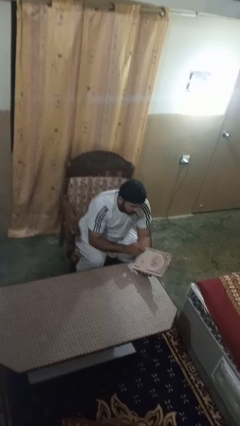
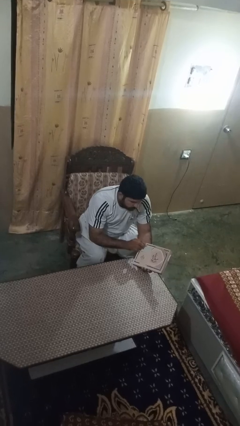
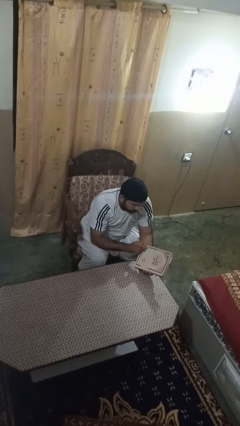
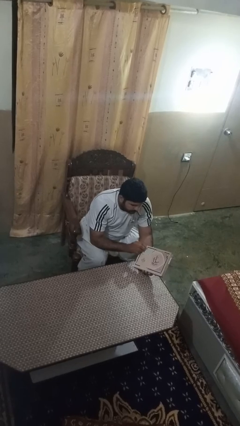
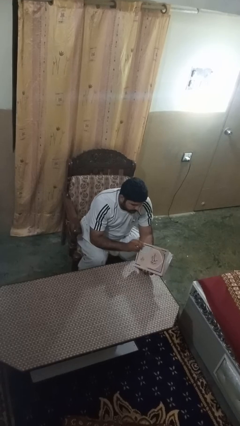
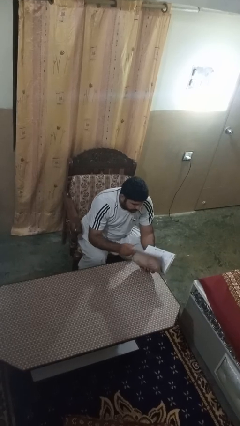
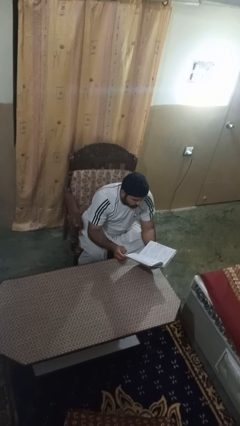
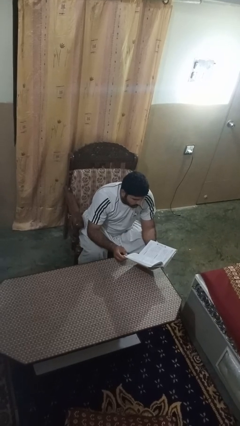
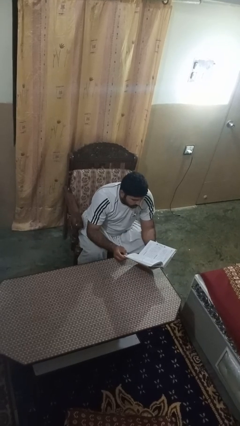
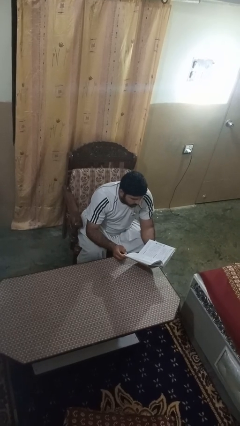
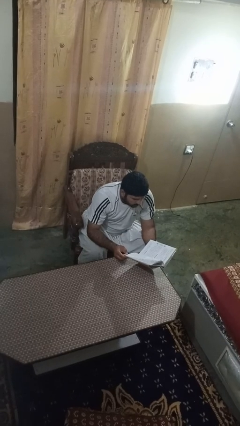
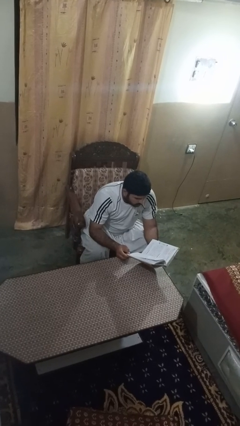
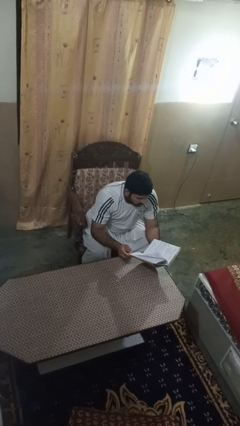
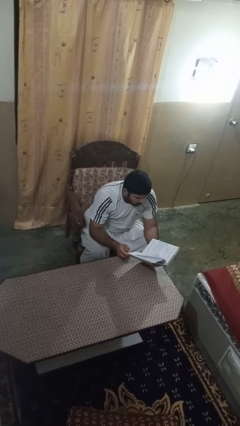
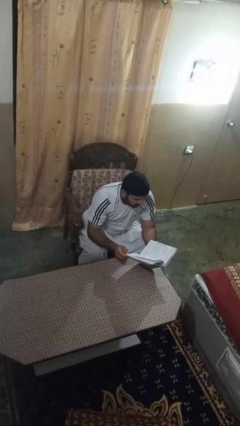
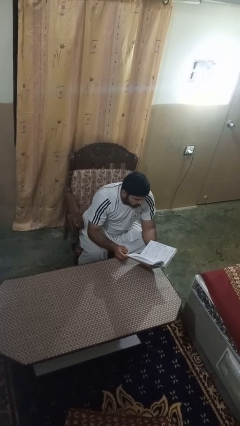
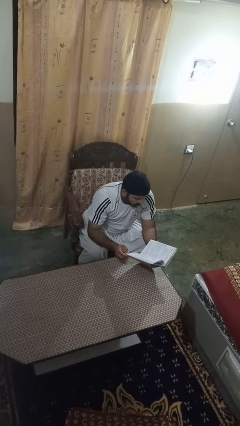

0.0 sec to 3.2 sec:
person reads book

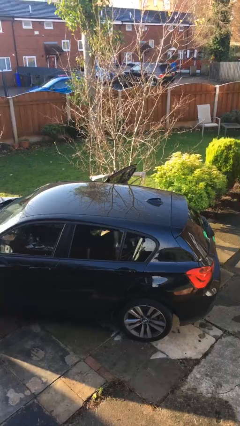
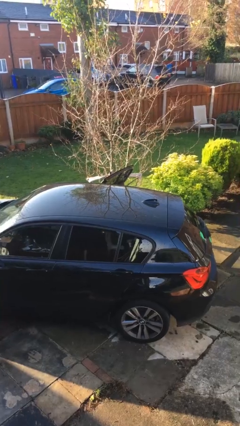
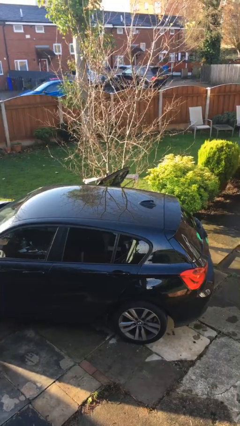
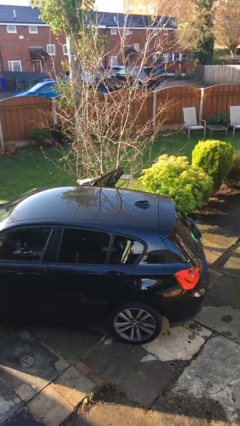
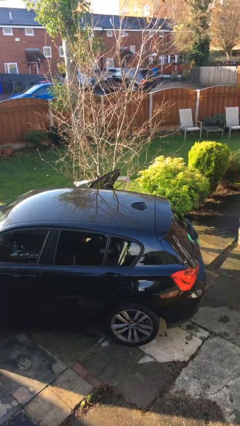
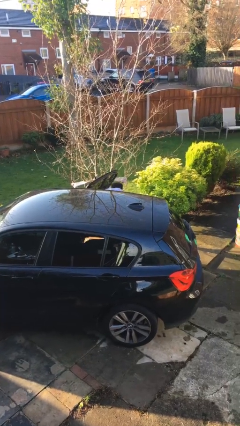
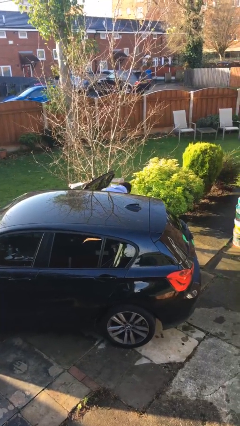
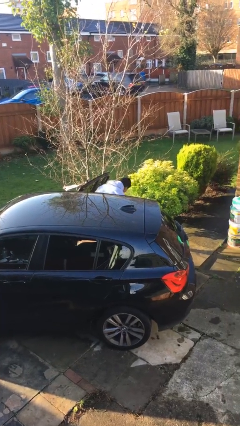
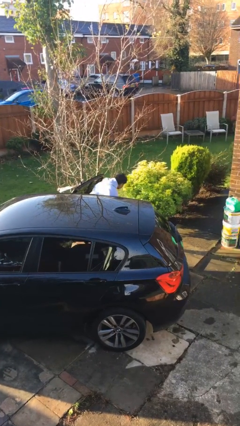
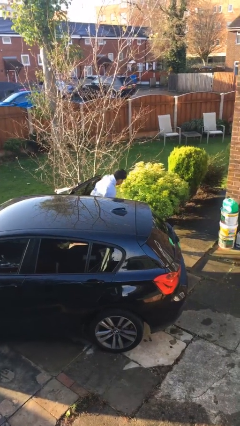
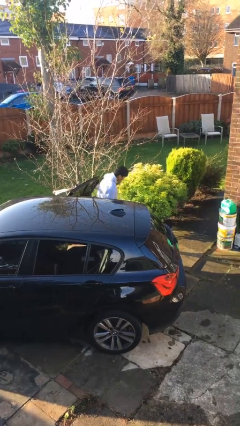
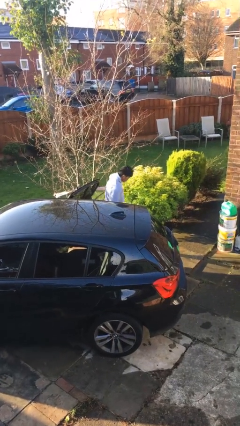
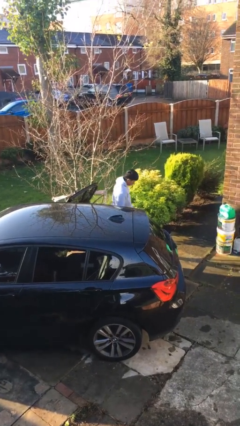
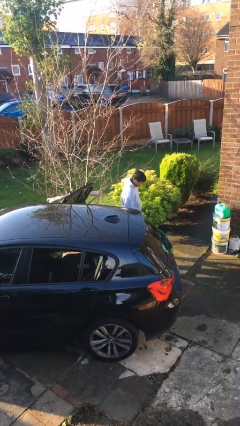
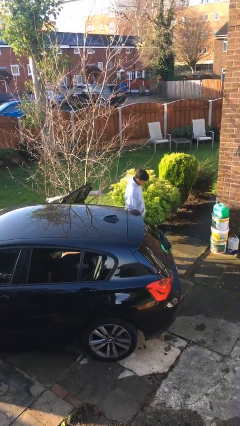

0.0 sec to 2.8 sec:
person exits car

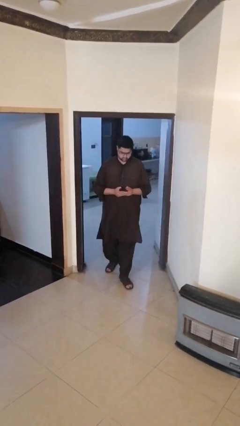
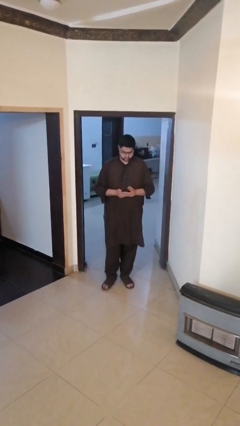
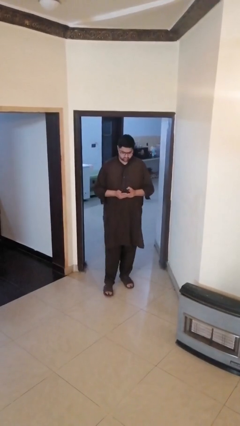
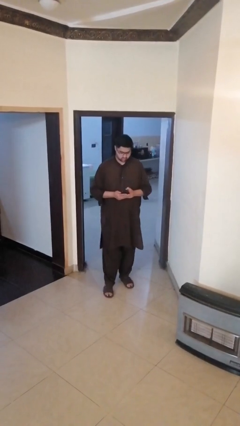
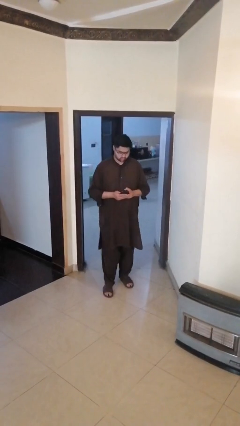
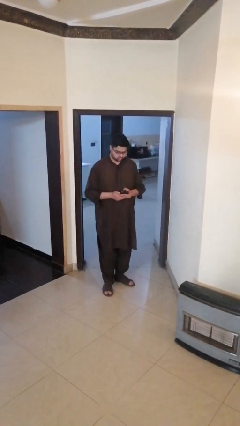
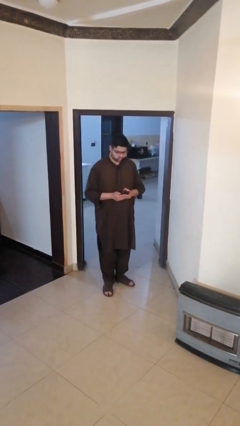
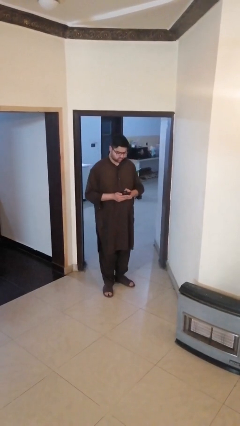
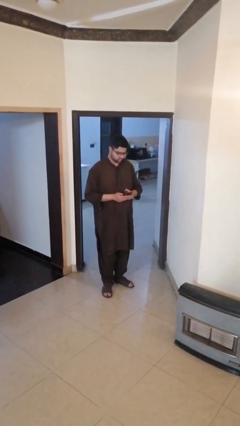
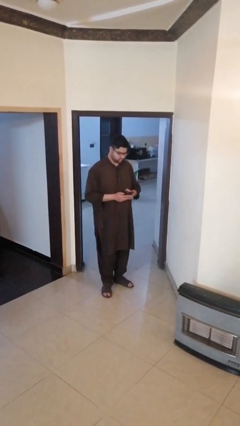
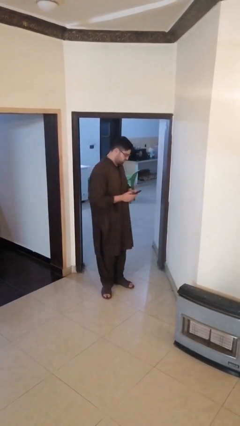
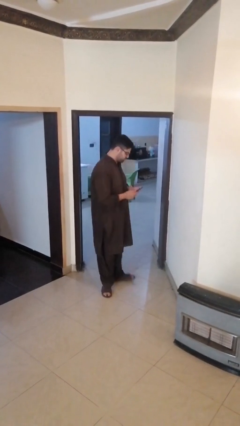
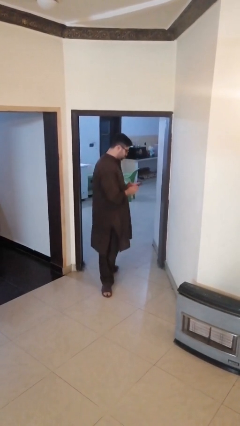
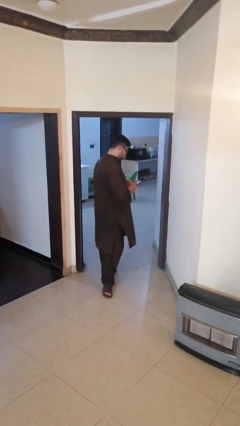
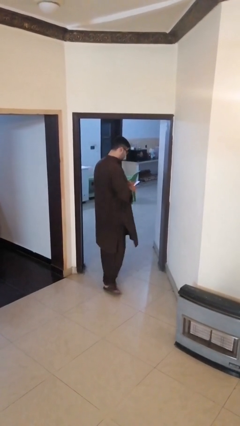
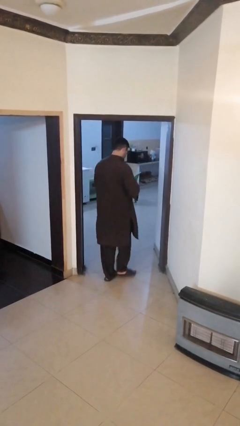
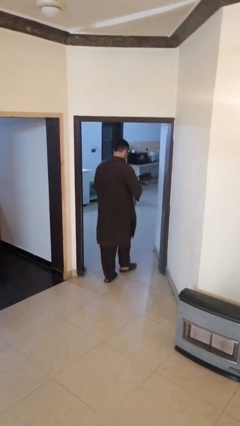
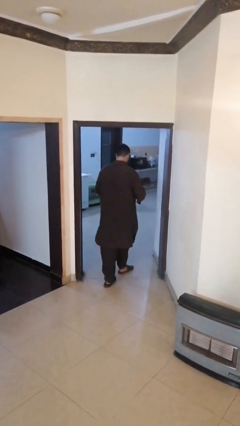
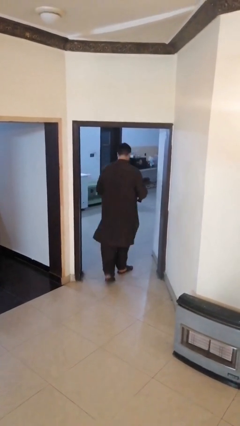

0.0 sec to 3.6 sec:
person enters scene through structure

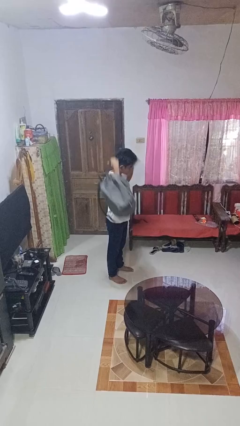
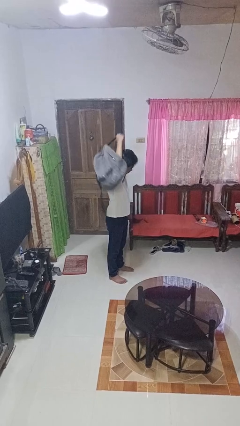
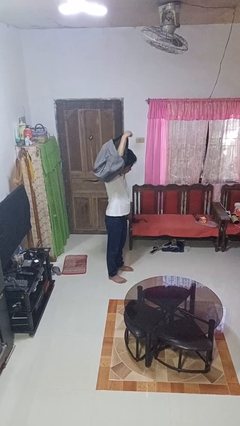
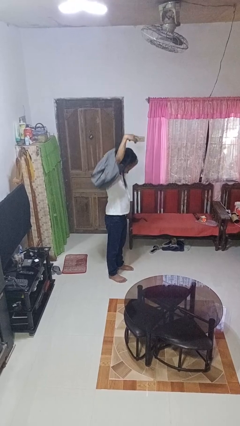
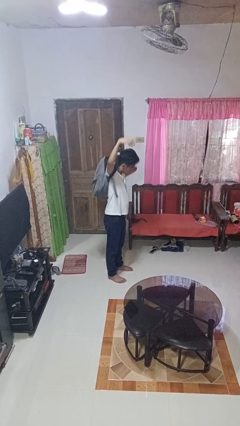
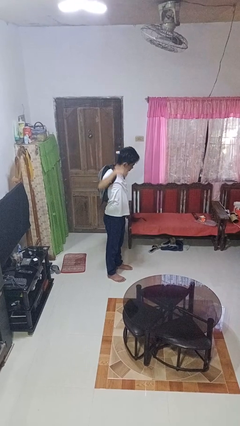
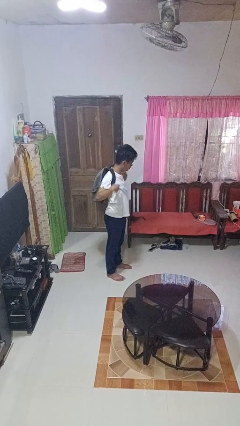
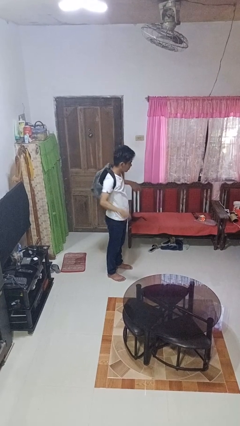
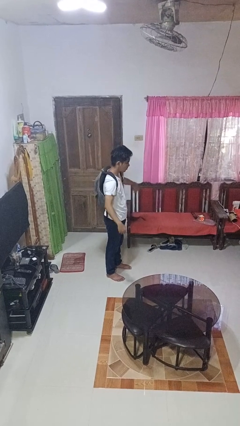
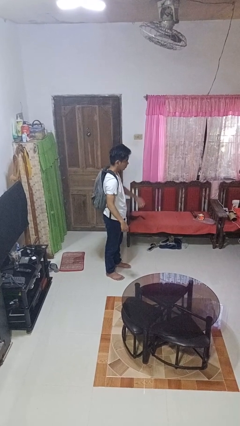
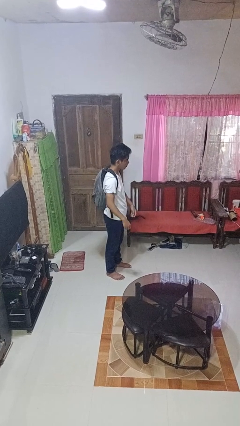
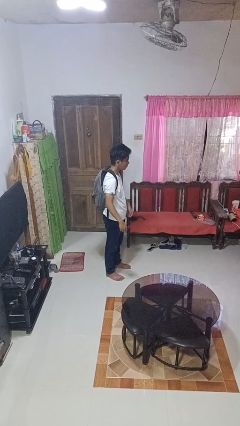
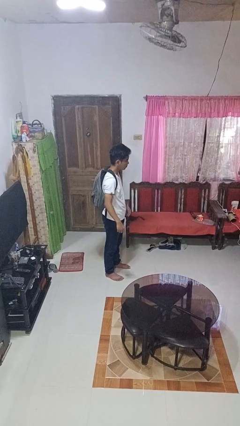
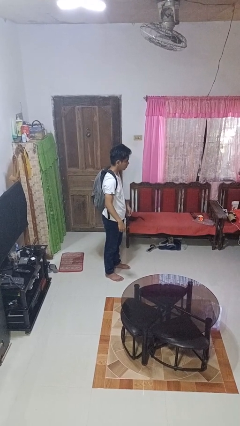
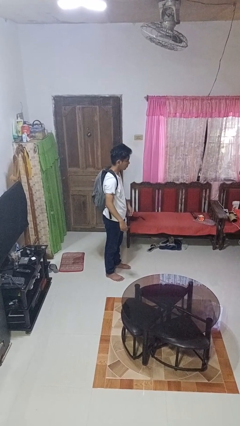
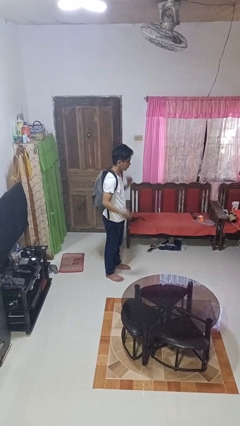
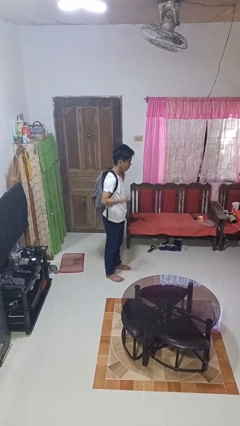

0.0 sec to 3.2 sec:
person puts on backpack

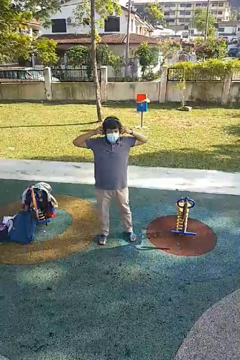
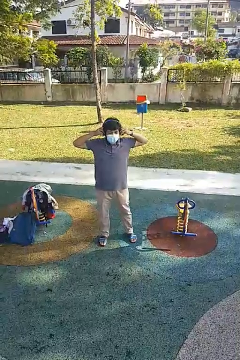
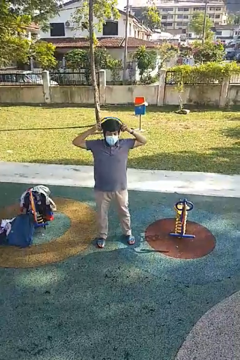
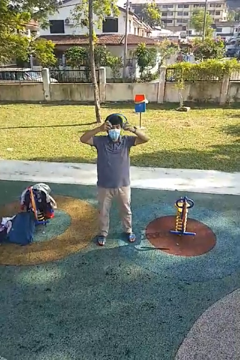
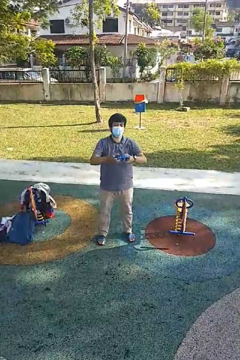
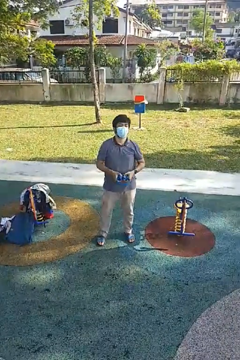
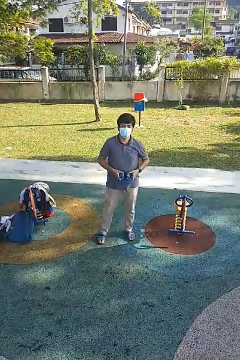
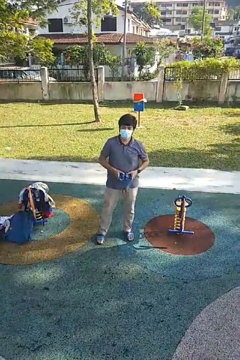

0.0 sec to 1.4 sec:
person takes off headphones

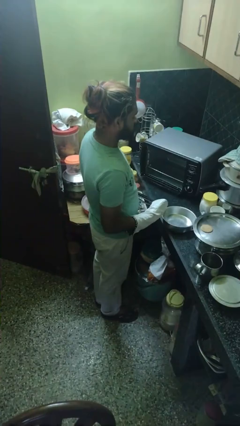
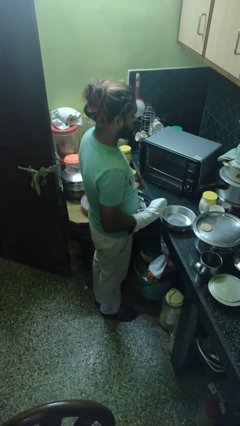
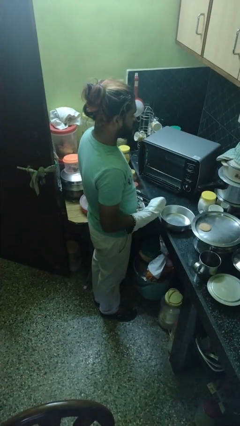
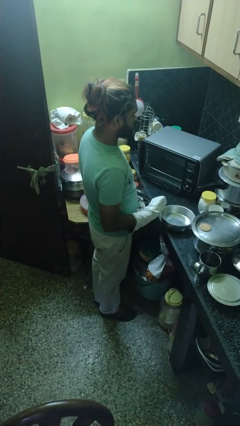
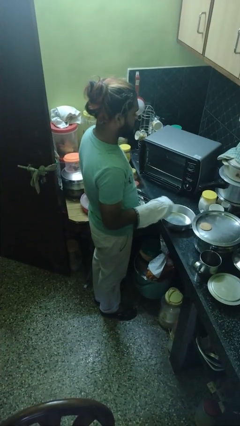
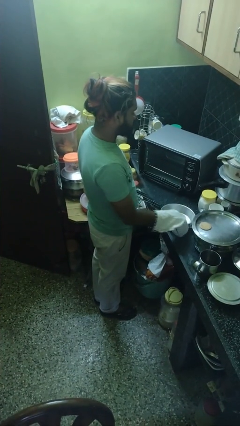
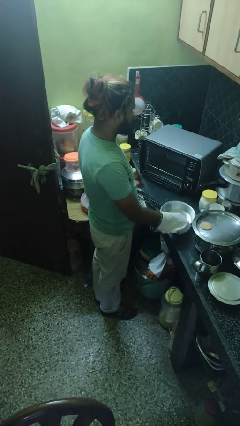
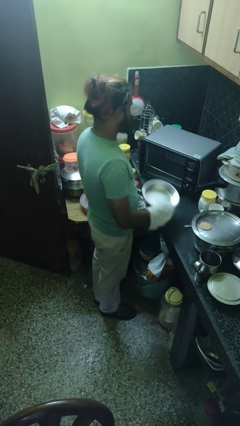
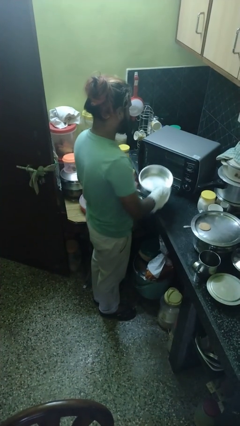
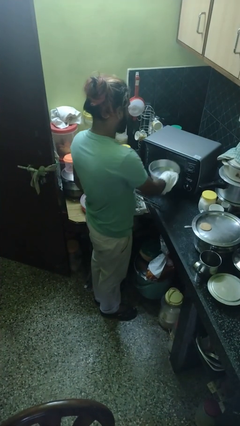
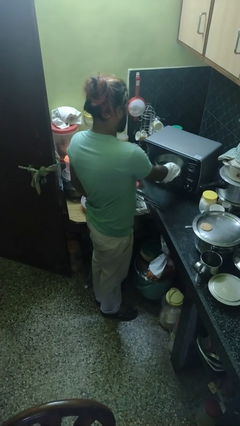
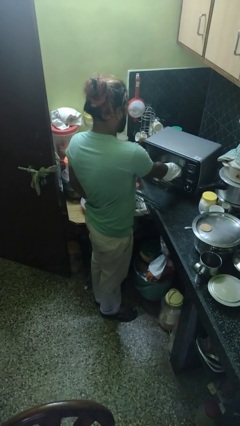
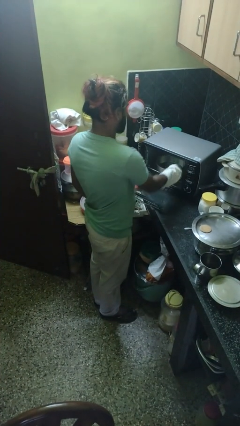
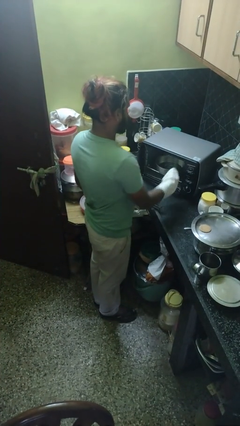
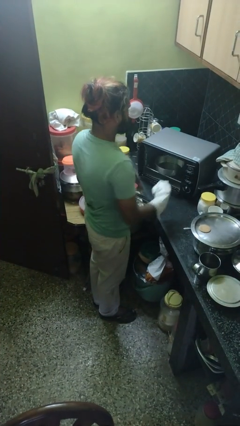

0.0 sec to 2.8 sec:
person puts object into oven

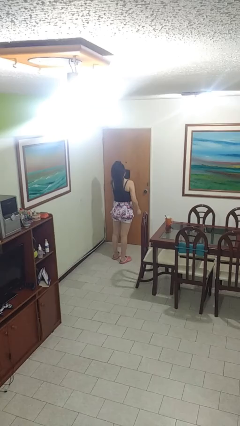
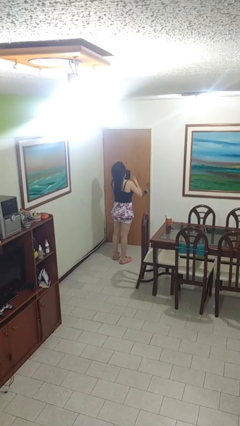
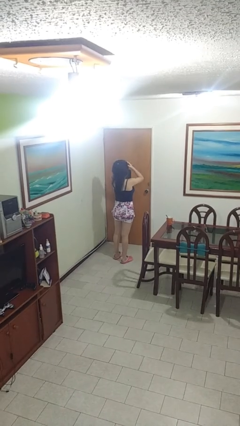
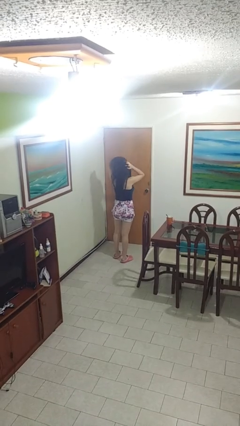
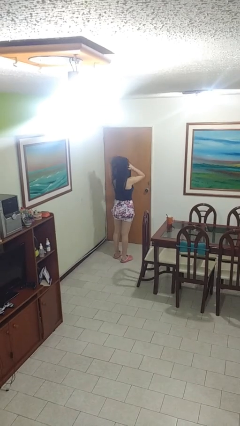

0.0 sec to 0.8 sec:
person strokes hair
